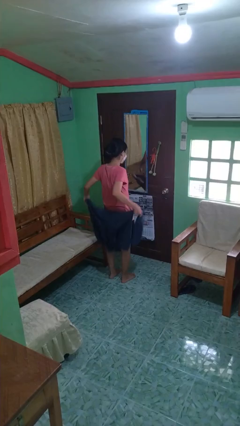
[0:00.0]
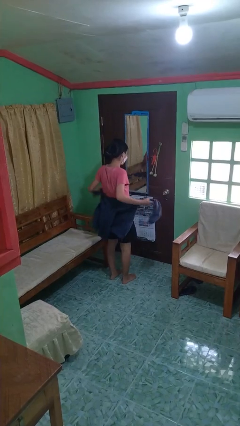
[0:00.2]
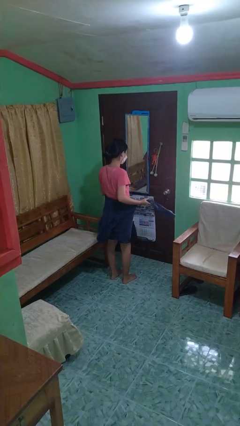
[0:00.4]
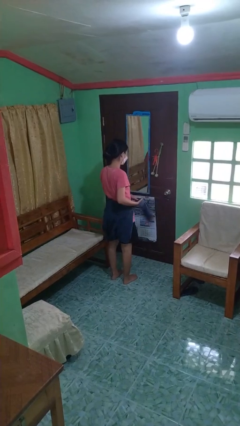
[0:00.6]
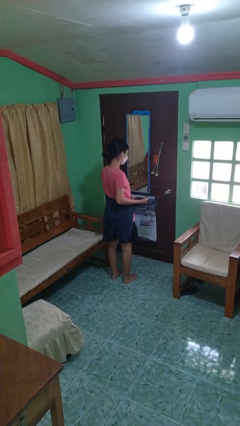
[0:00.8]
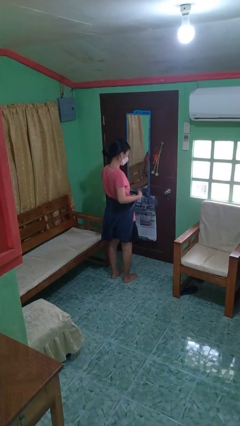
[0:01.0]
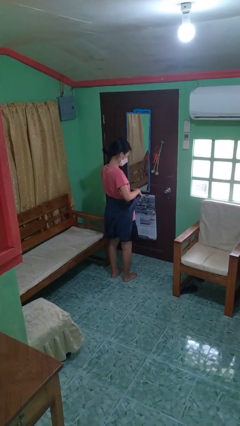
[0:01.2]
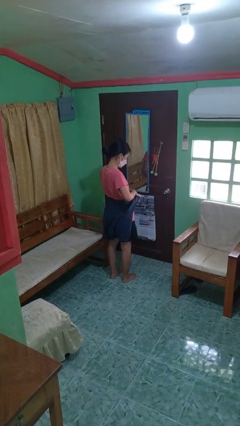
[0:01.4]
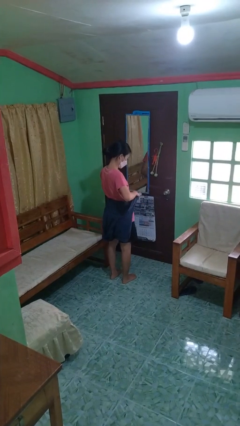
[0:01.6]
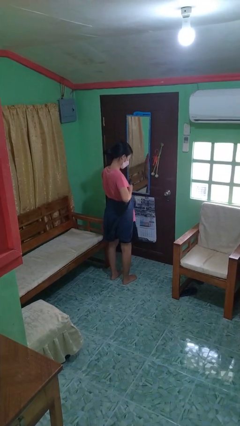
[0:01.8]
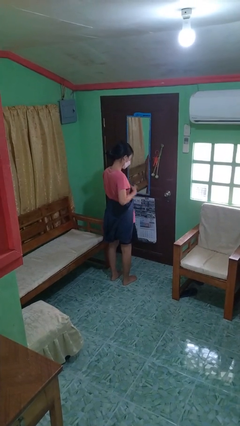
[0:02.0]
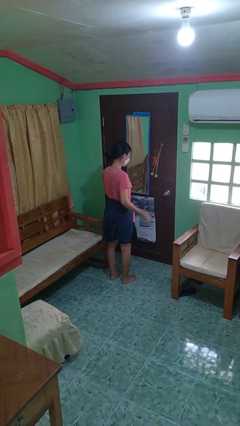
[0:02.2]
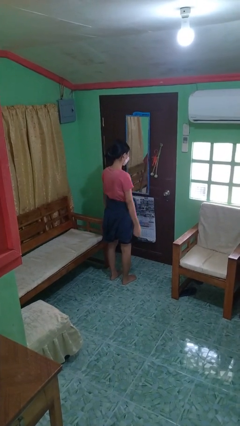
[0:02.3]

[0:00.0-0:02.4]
person ties jacket around waist

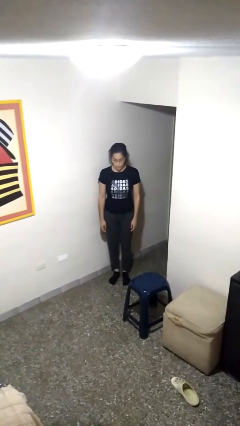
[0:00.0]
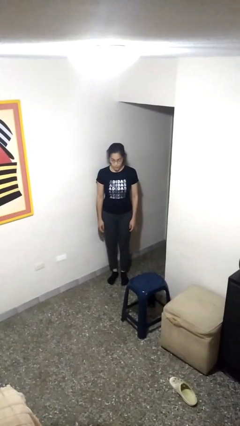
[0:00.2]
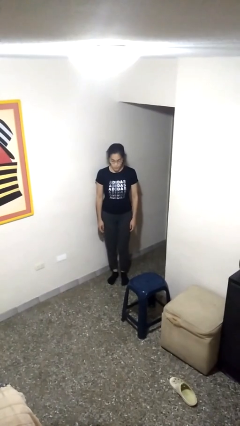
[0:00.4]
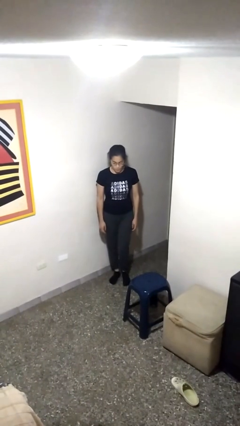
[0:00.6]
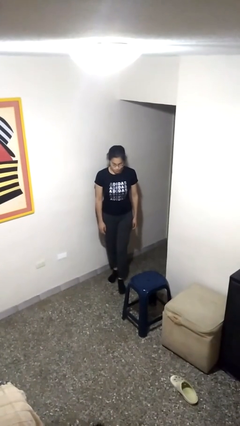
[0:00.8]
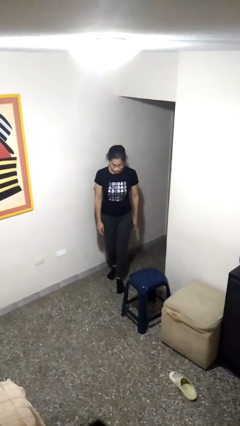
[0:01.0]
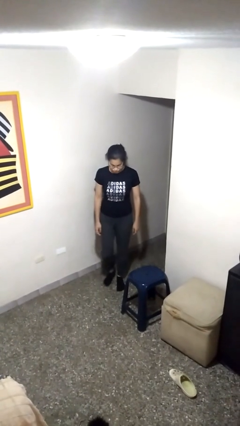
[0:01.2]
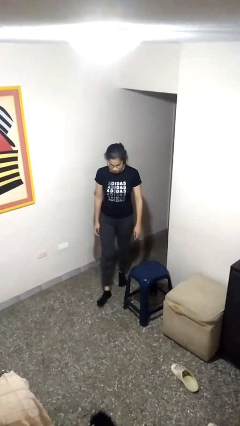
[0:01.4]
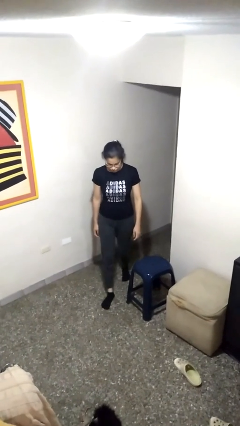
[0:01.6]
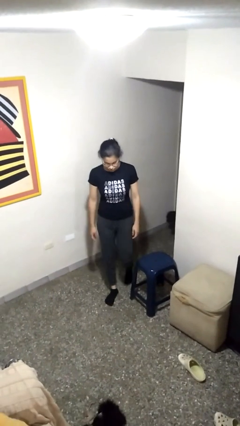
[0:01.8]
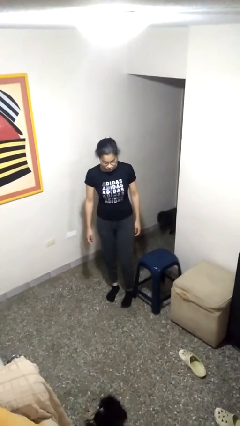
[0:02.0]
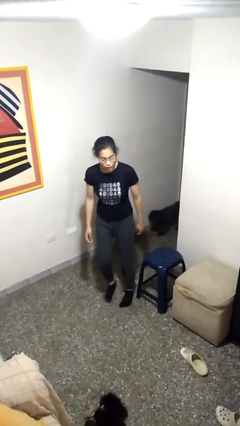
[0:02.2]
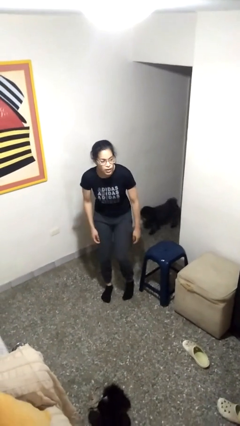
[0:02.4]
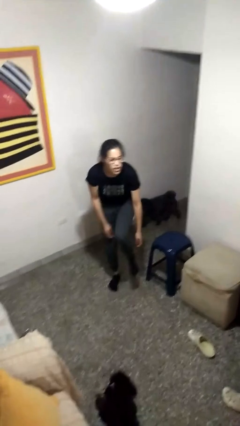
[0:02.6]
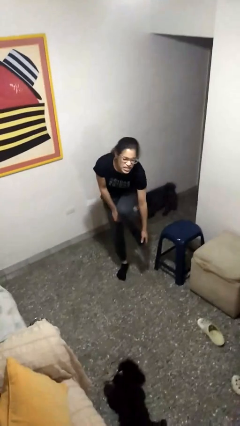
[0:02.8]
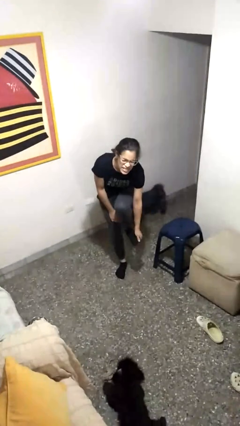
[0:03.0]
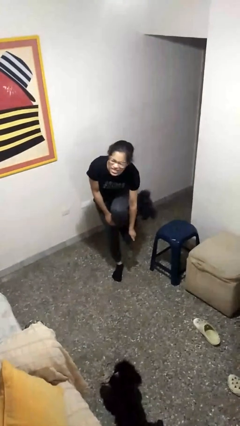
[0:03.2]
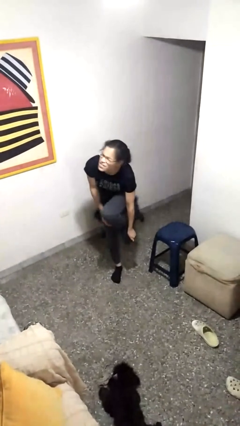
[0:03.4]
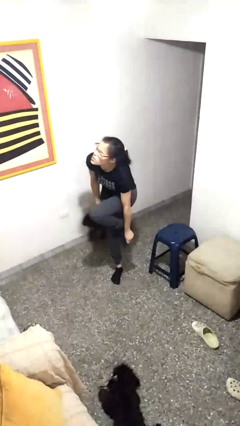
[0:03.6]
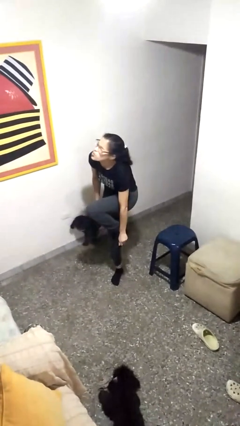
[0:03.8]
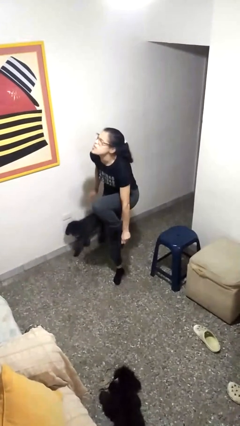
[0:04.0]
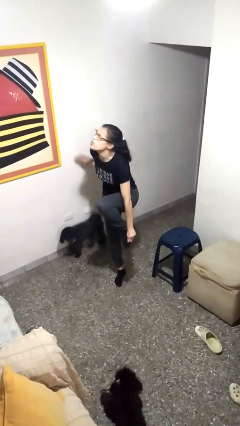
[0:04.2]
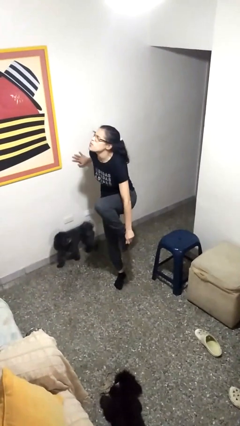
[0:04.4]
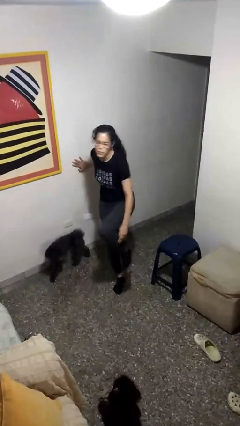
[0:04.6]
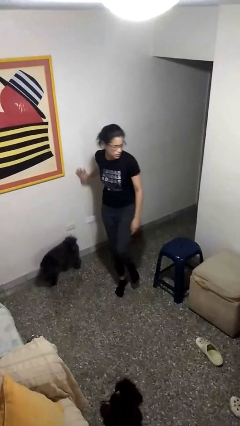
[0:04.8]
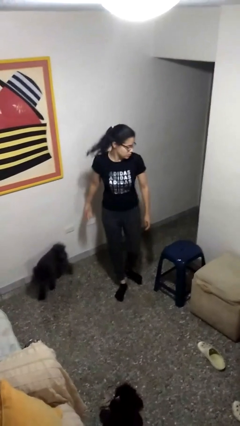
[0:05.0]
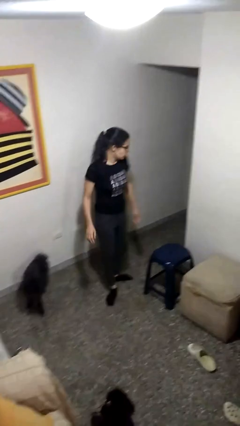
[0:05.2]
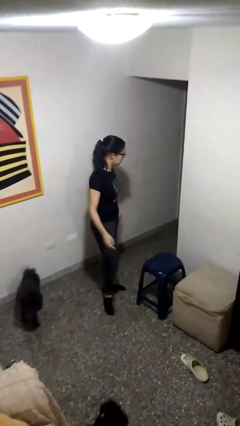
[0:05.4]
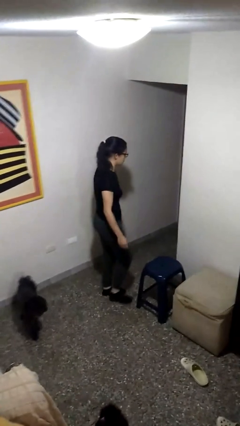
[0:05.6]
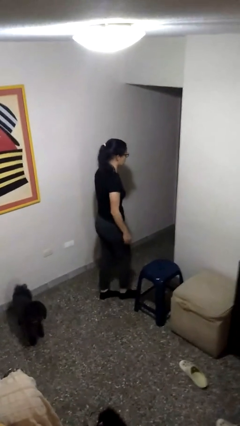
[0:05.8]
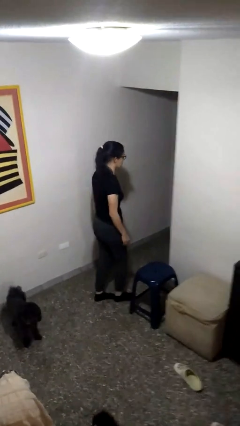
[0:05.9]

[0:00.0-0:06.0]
person stubs toe

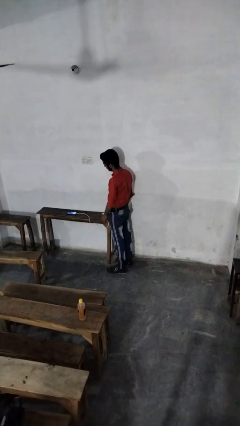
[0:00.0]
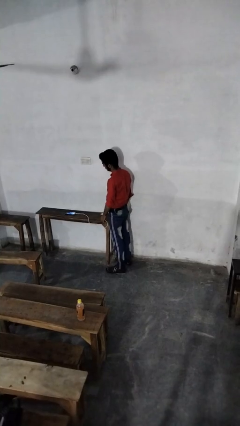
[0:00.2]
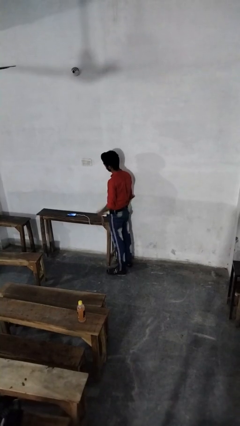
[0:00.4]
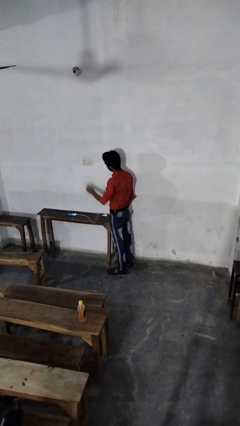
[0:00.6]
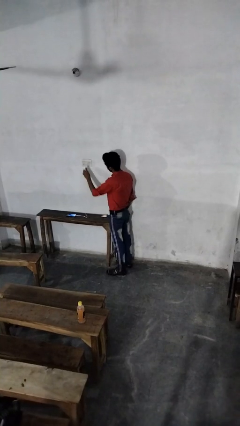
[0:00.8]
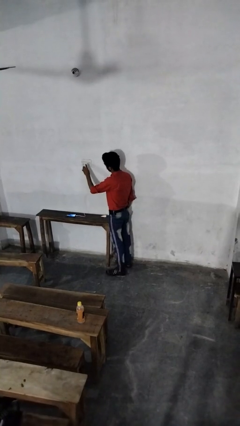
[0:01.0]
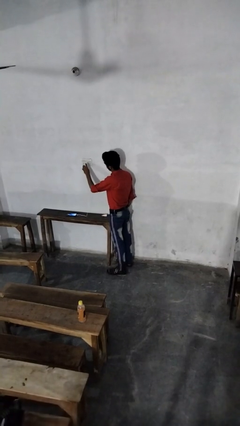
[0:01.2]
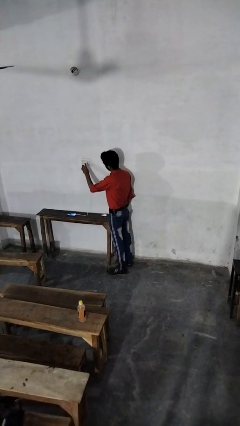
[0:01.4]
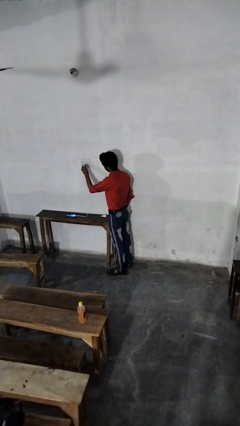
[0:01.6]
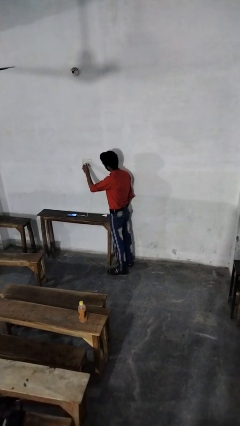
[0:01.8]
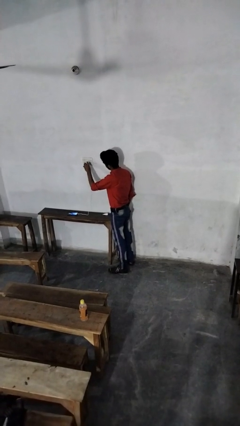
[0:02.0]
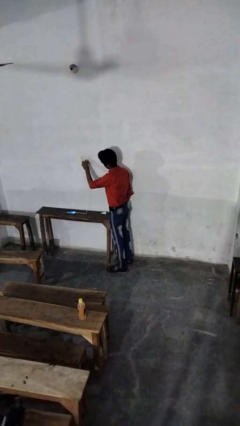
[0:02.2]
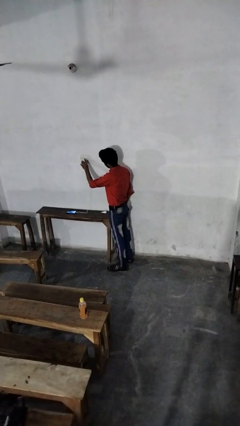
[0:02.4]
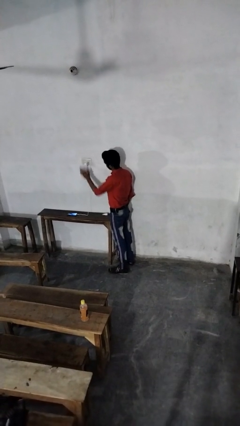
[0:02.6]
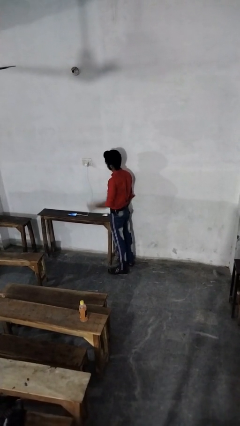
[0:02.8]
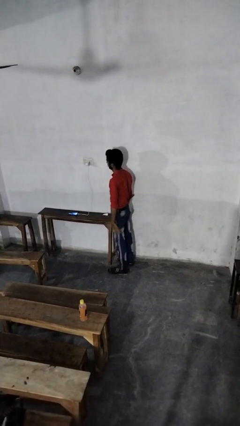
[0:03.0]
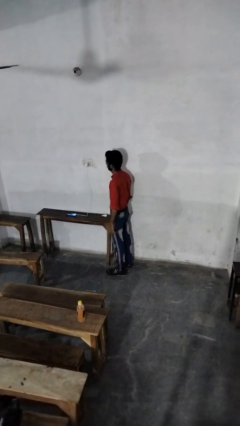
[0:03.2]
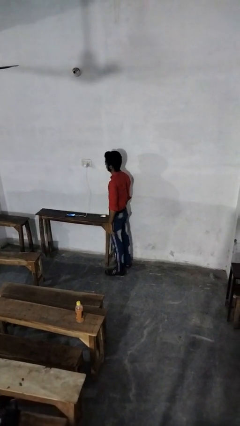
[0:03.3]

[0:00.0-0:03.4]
person plugs into electrical socket

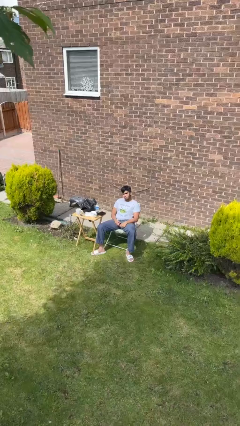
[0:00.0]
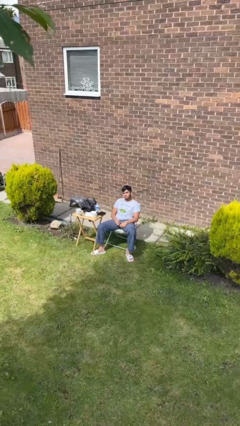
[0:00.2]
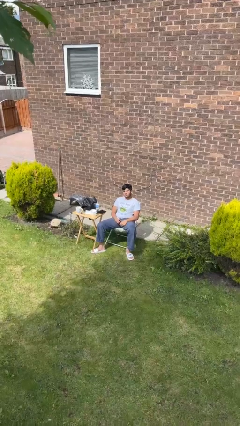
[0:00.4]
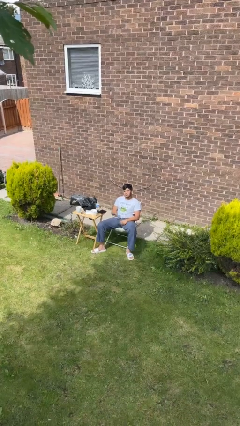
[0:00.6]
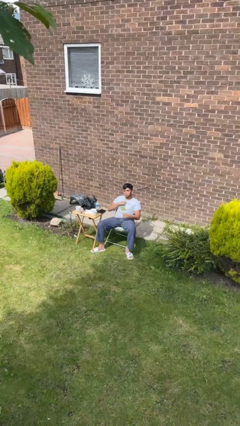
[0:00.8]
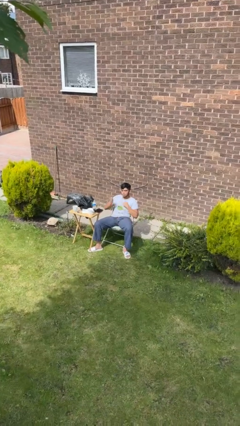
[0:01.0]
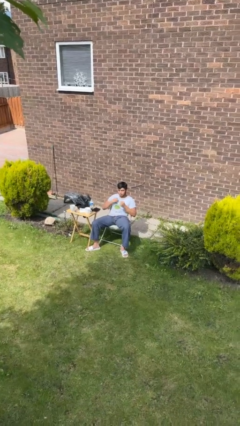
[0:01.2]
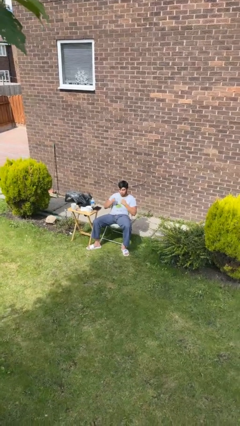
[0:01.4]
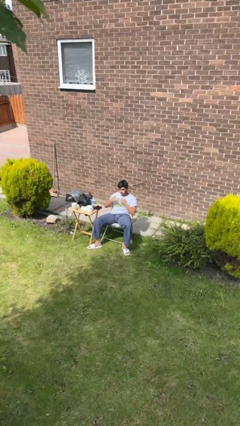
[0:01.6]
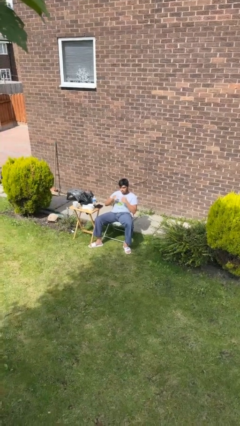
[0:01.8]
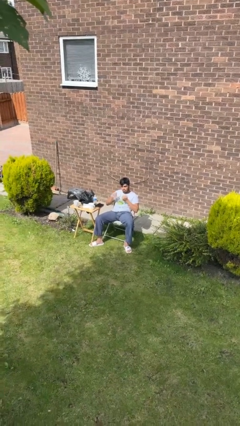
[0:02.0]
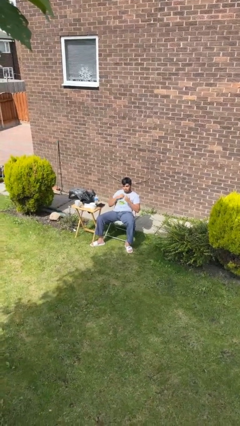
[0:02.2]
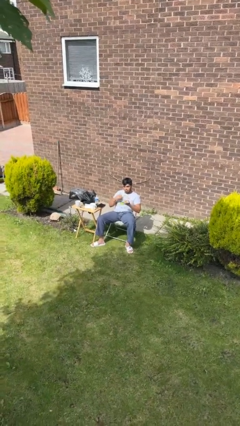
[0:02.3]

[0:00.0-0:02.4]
person drums on chest

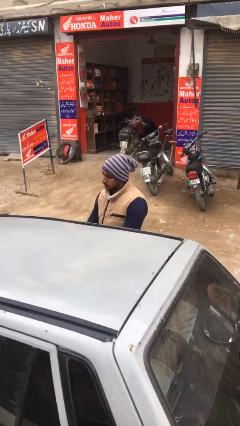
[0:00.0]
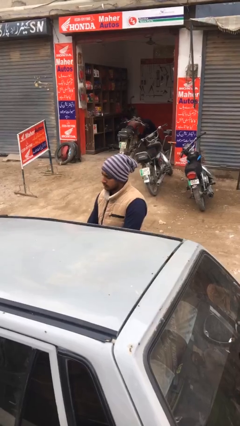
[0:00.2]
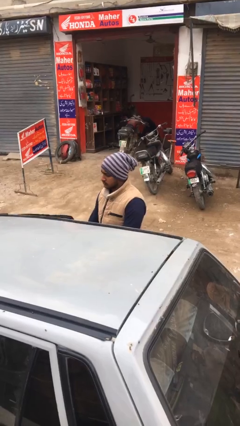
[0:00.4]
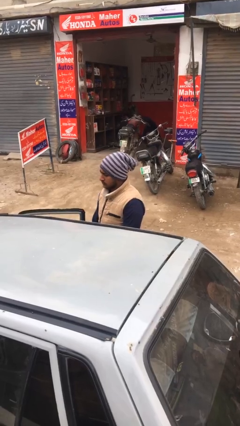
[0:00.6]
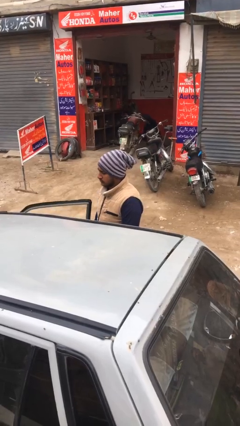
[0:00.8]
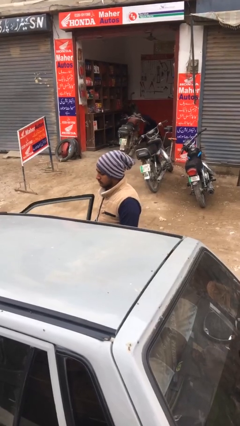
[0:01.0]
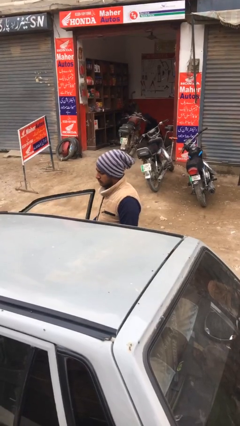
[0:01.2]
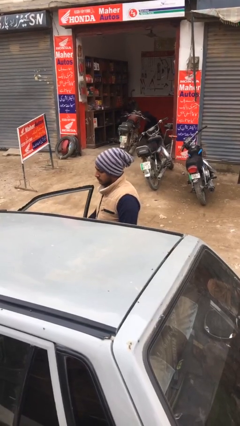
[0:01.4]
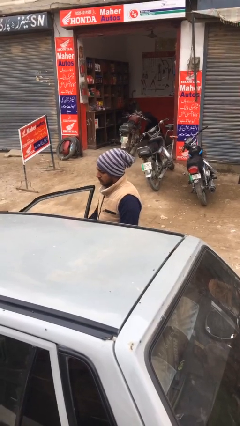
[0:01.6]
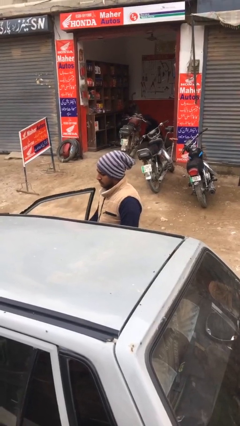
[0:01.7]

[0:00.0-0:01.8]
person opens car door

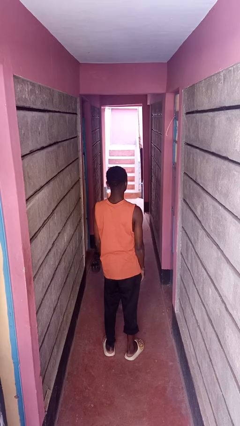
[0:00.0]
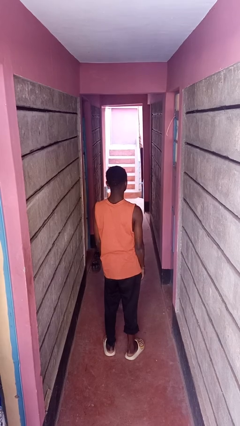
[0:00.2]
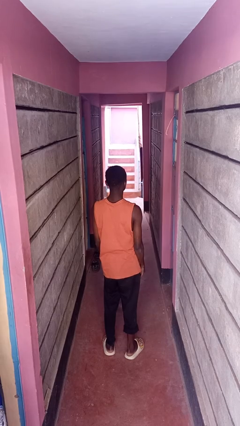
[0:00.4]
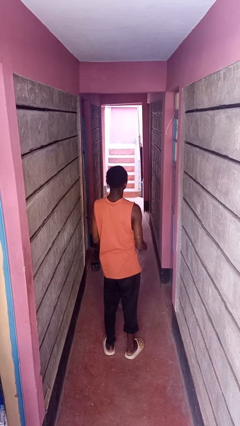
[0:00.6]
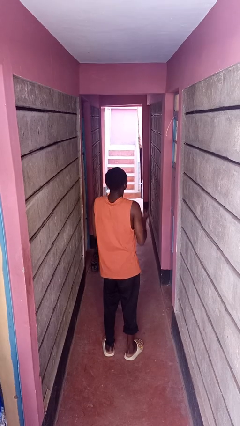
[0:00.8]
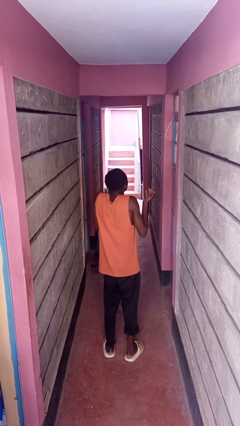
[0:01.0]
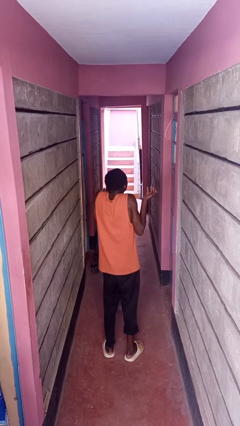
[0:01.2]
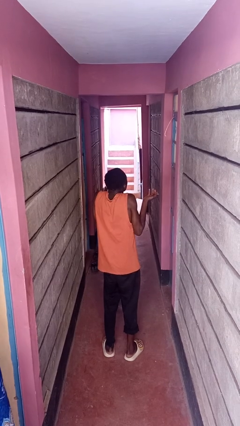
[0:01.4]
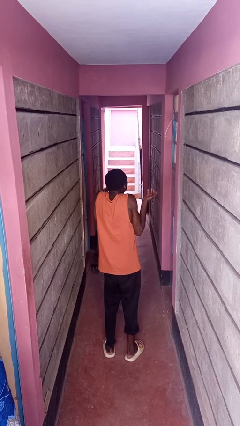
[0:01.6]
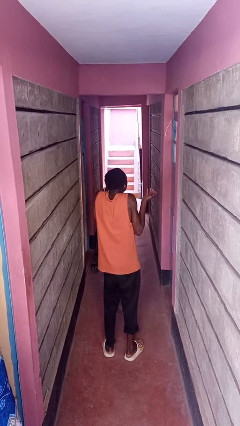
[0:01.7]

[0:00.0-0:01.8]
person shrugs
